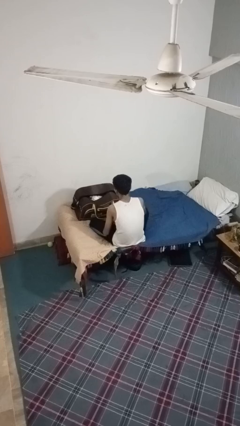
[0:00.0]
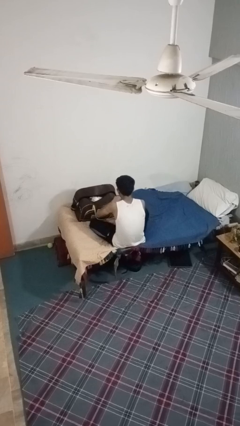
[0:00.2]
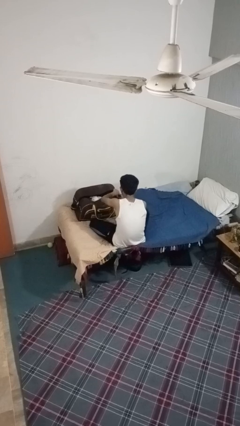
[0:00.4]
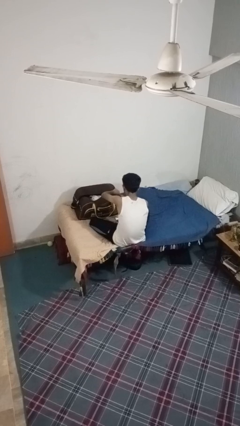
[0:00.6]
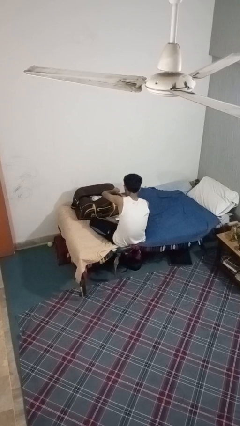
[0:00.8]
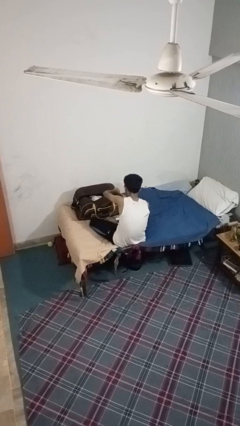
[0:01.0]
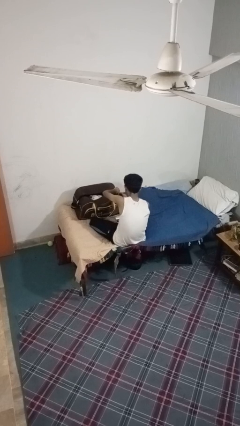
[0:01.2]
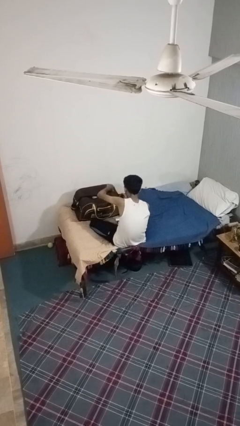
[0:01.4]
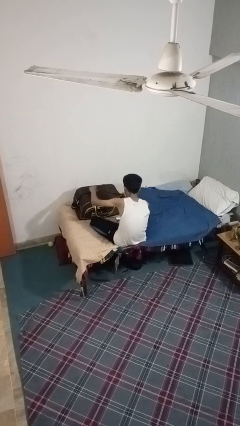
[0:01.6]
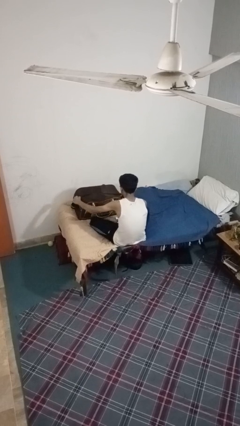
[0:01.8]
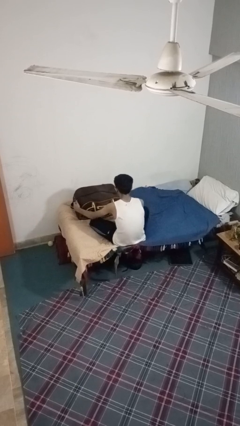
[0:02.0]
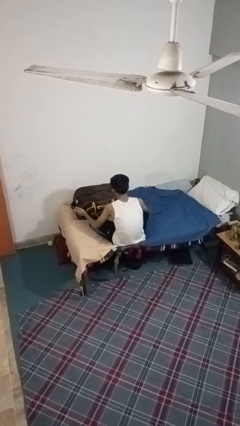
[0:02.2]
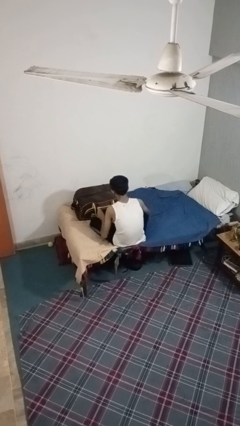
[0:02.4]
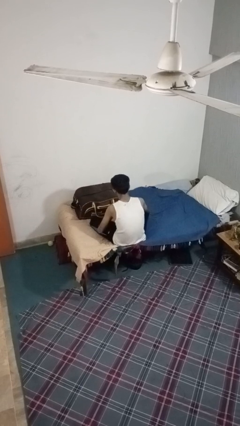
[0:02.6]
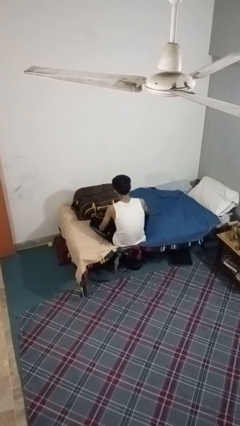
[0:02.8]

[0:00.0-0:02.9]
person closes suitcase

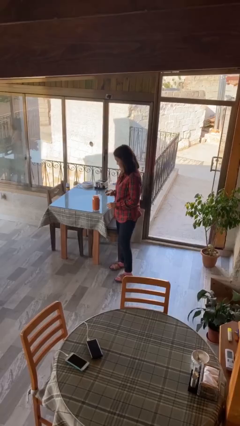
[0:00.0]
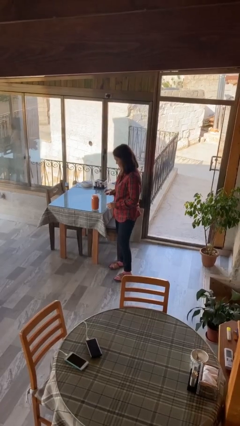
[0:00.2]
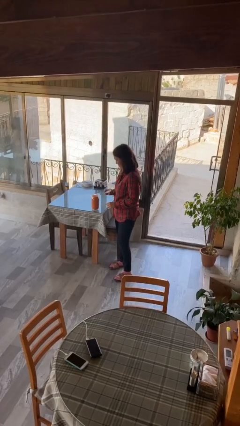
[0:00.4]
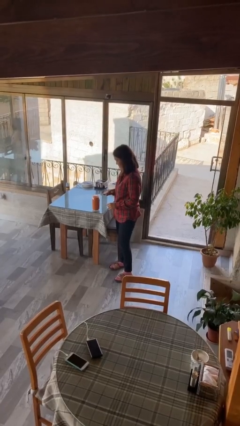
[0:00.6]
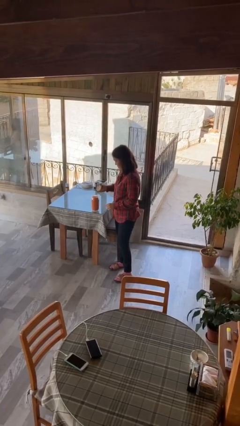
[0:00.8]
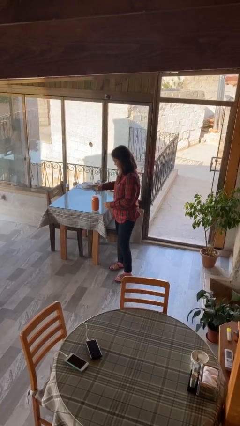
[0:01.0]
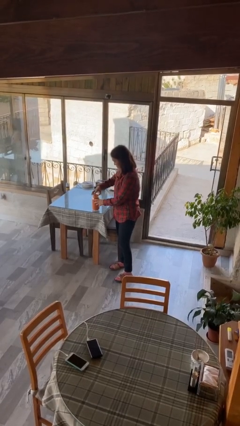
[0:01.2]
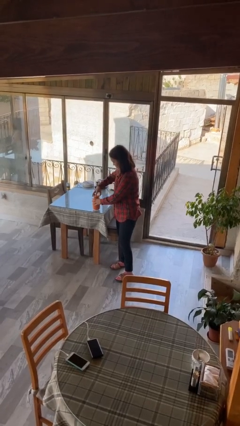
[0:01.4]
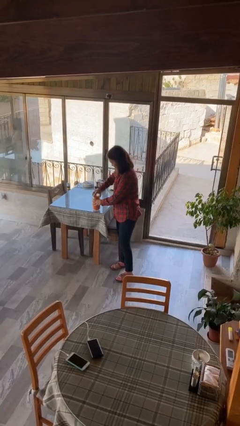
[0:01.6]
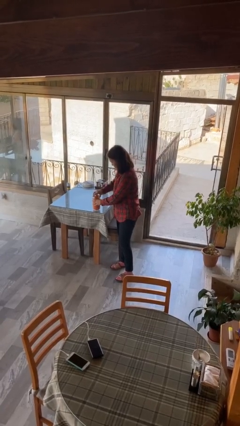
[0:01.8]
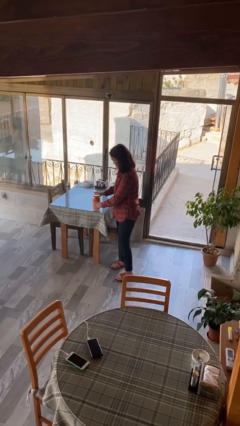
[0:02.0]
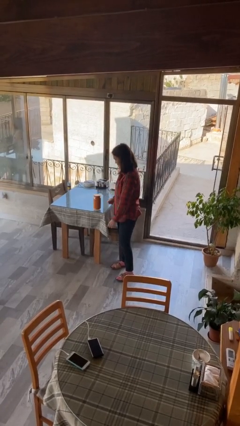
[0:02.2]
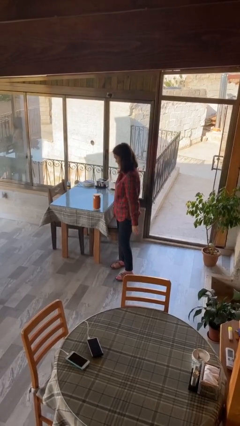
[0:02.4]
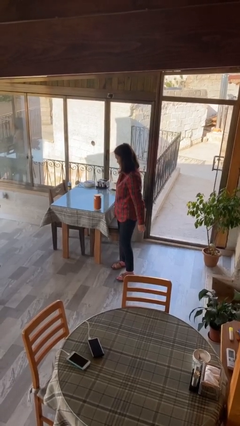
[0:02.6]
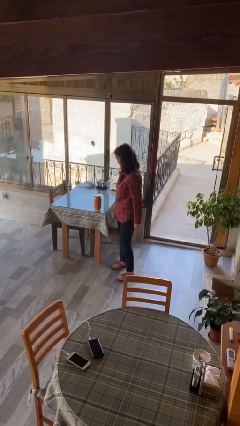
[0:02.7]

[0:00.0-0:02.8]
person closes jar

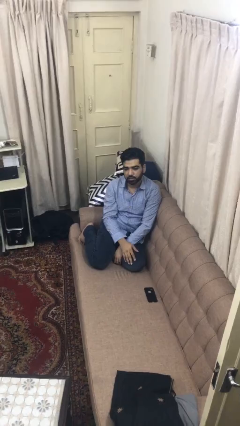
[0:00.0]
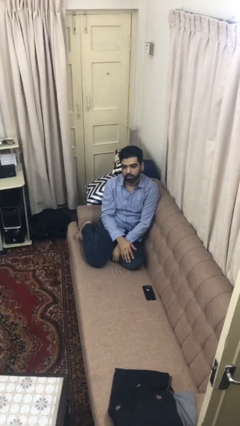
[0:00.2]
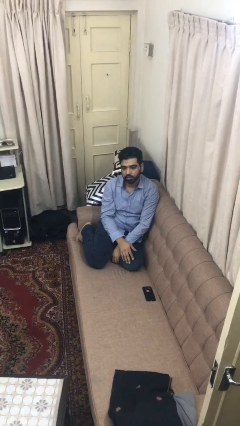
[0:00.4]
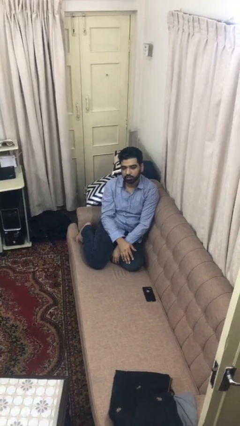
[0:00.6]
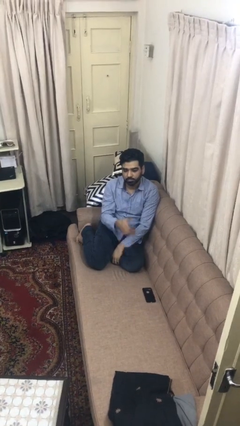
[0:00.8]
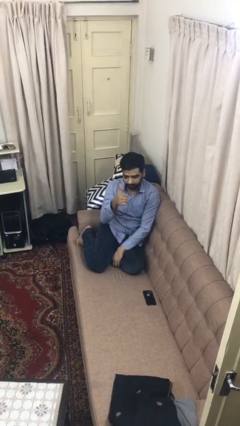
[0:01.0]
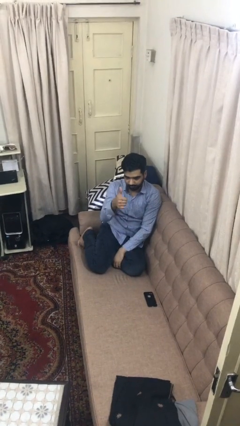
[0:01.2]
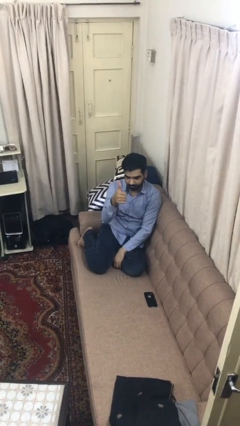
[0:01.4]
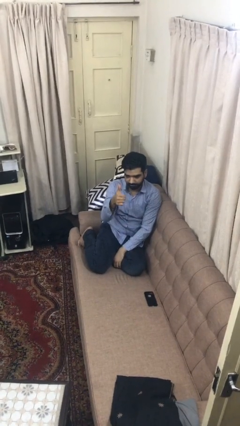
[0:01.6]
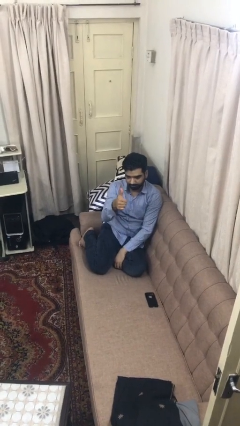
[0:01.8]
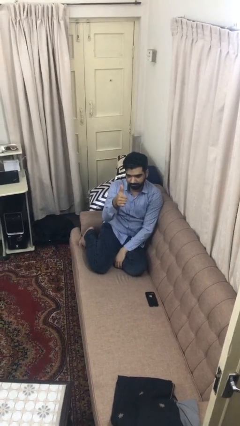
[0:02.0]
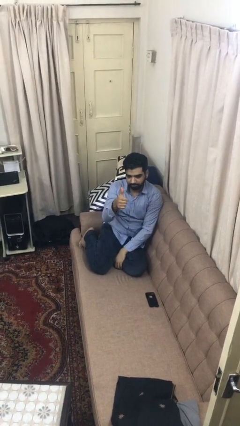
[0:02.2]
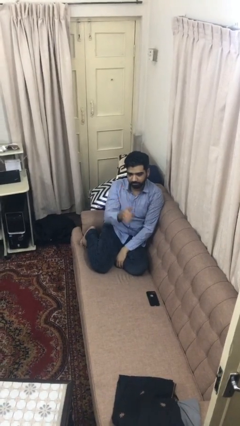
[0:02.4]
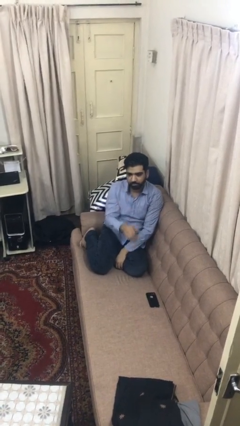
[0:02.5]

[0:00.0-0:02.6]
person gestures thumbs up

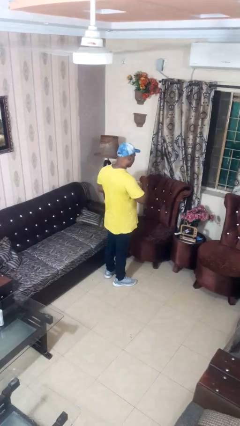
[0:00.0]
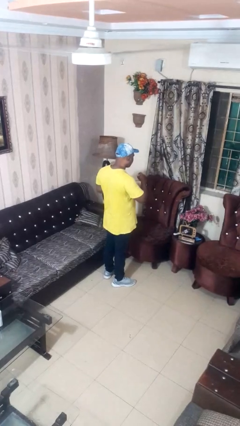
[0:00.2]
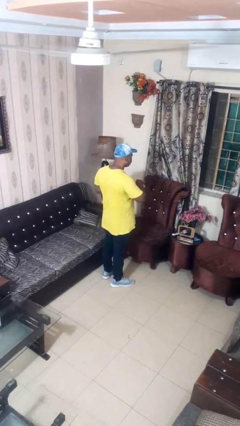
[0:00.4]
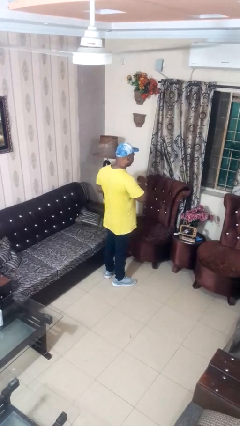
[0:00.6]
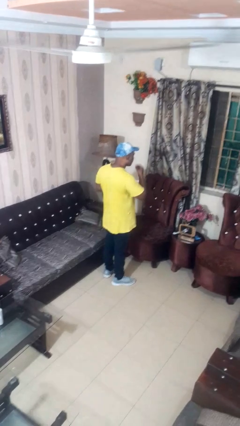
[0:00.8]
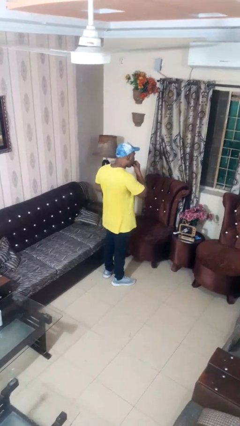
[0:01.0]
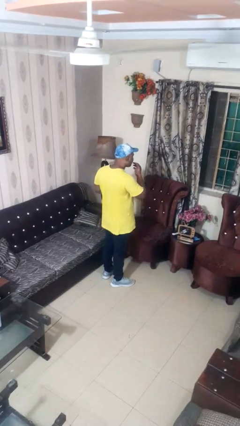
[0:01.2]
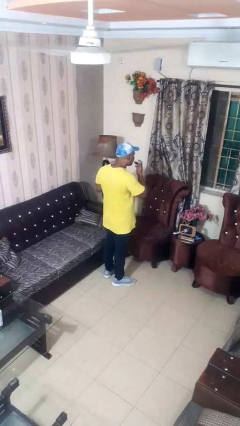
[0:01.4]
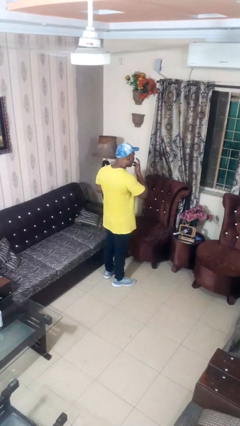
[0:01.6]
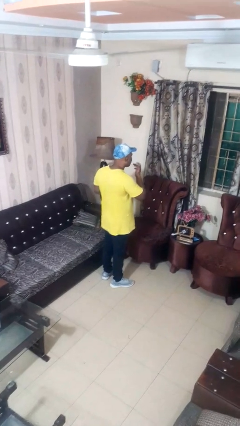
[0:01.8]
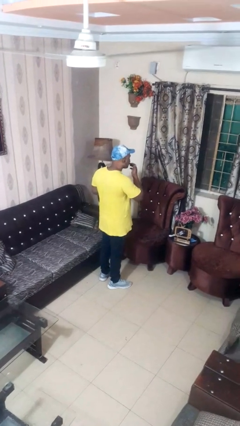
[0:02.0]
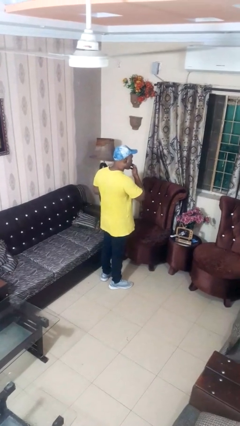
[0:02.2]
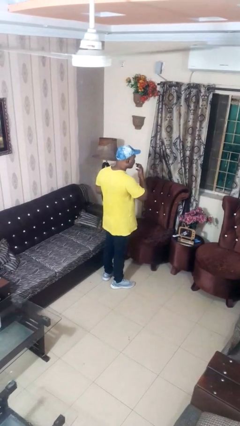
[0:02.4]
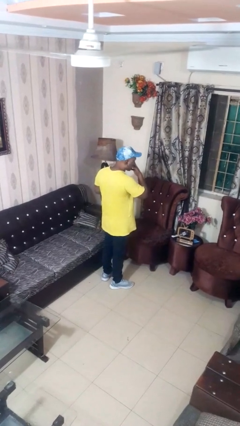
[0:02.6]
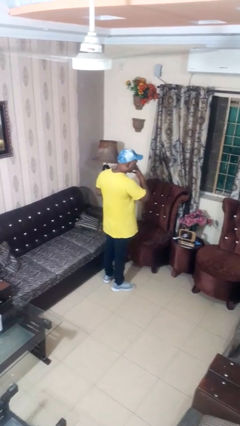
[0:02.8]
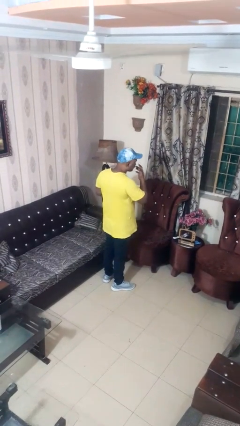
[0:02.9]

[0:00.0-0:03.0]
person licks fingers

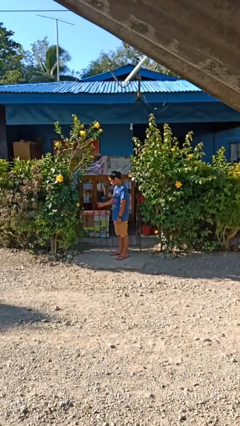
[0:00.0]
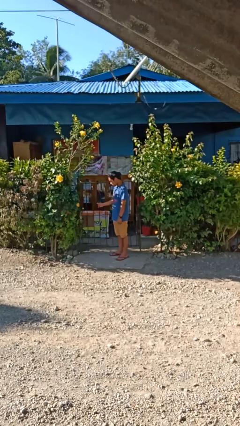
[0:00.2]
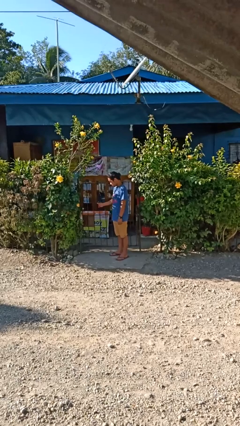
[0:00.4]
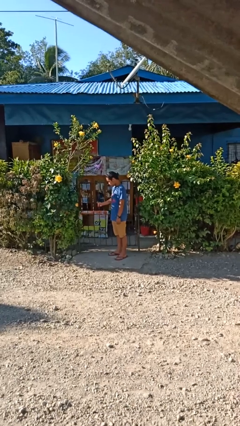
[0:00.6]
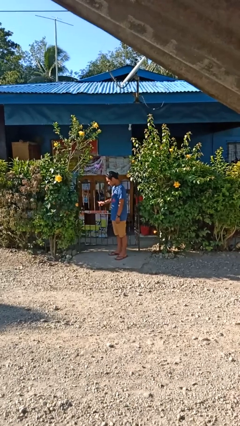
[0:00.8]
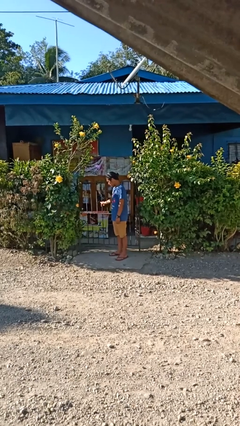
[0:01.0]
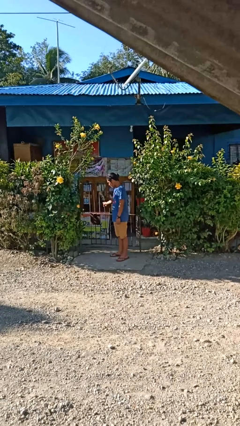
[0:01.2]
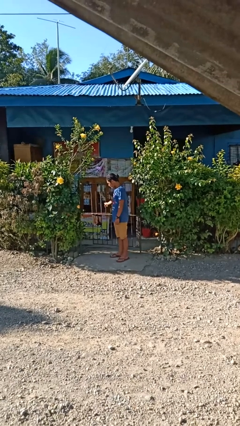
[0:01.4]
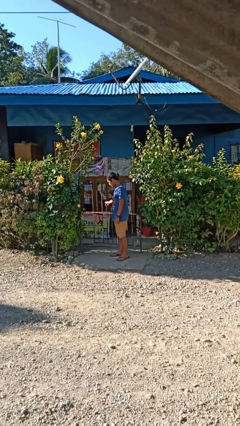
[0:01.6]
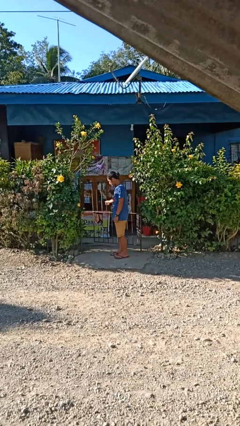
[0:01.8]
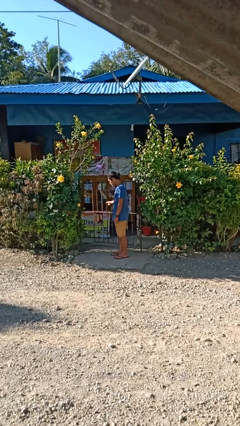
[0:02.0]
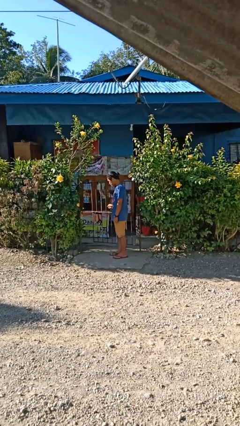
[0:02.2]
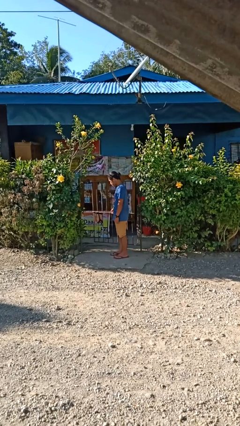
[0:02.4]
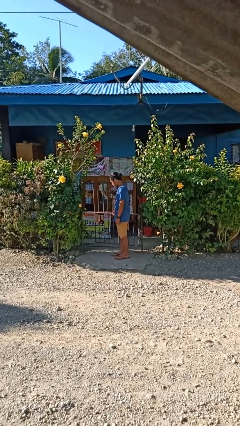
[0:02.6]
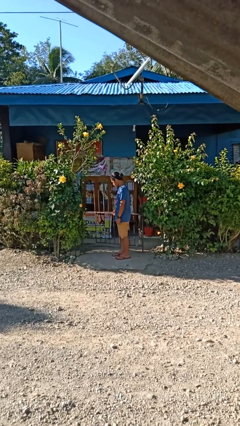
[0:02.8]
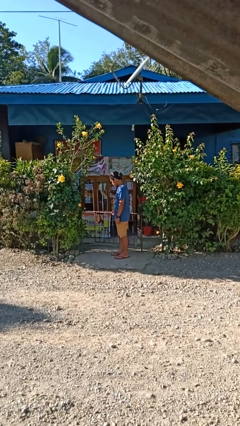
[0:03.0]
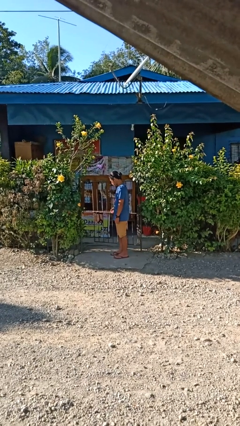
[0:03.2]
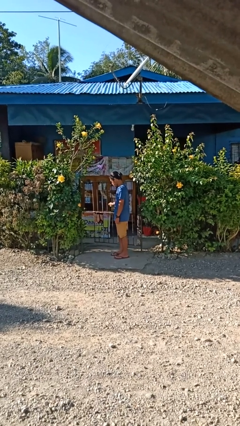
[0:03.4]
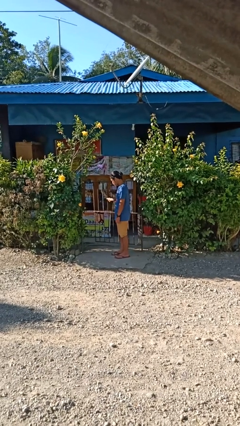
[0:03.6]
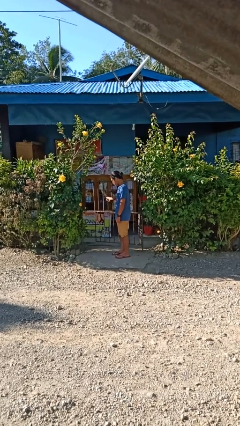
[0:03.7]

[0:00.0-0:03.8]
person opens gate

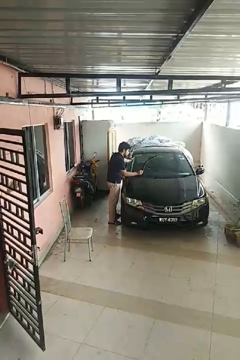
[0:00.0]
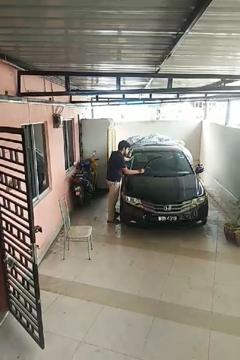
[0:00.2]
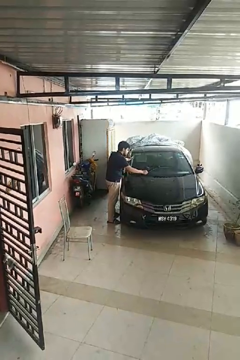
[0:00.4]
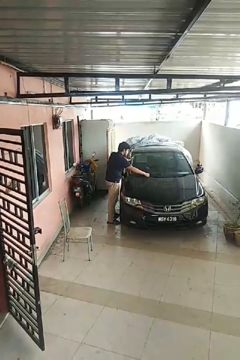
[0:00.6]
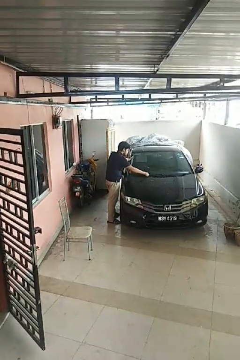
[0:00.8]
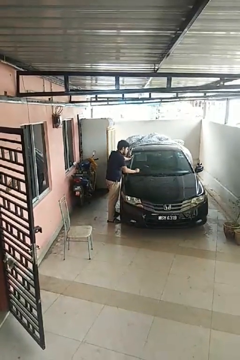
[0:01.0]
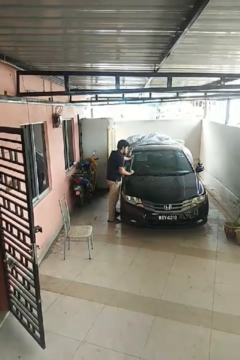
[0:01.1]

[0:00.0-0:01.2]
person flips down car wipers

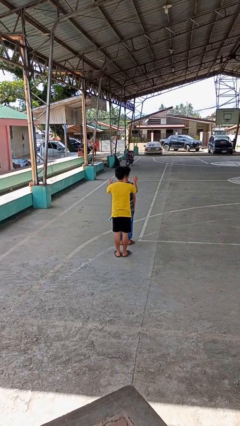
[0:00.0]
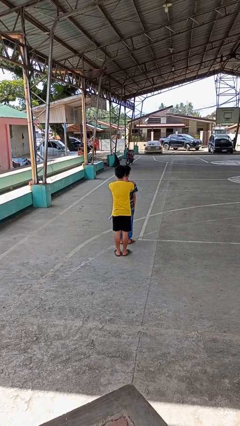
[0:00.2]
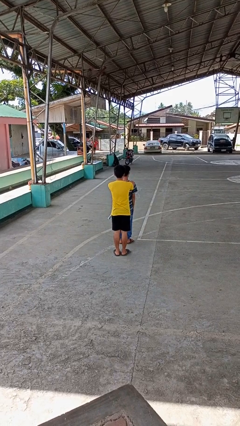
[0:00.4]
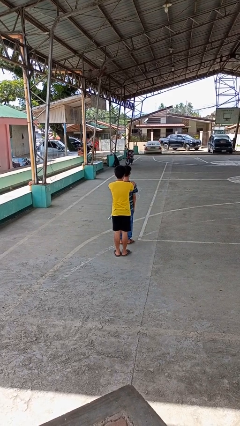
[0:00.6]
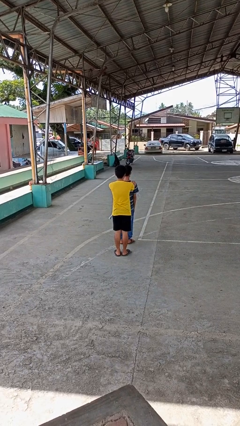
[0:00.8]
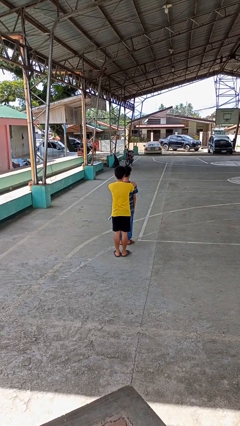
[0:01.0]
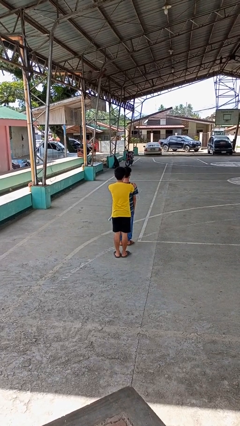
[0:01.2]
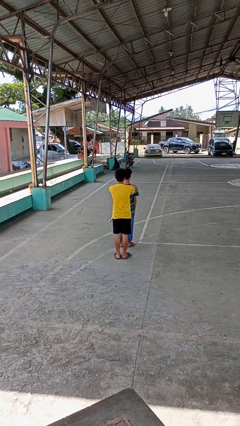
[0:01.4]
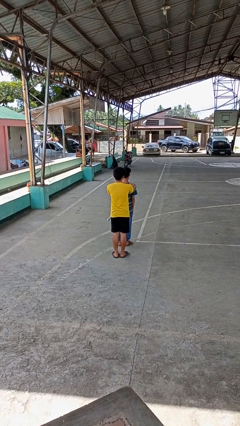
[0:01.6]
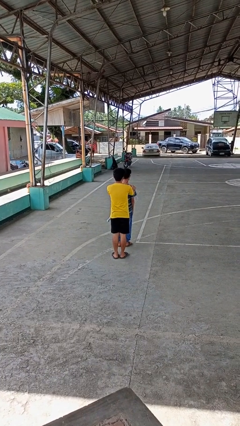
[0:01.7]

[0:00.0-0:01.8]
person grabs person by shoulder
